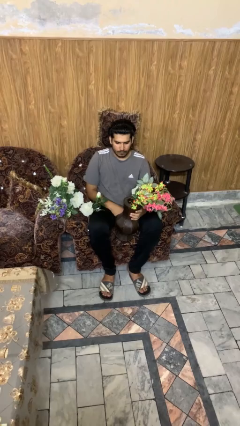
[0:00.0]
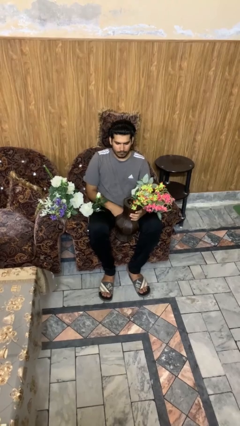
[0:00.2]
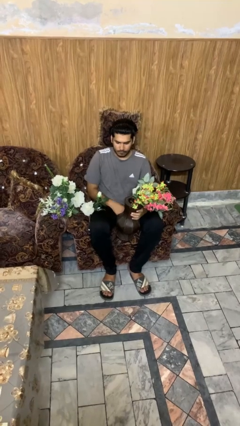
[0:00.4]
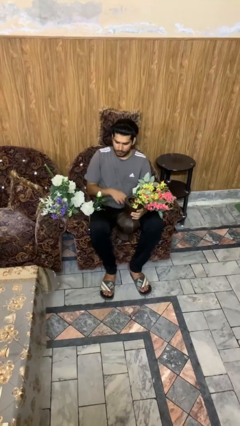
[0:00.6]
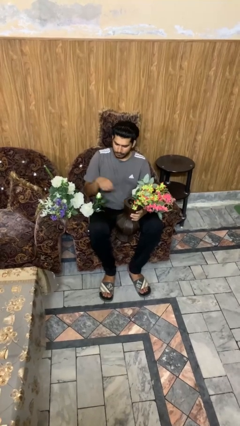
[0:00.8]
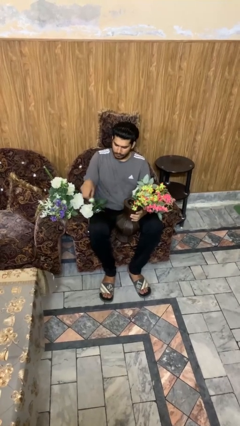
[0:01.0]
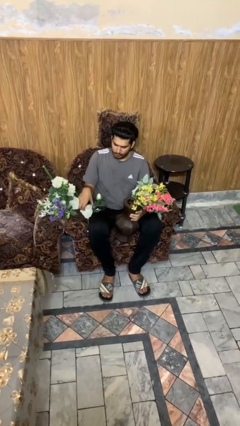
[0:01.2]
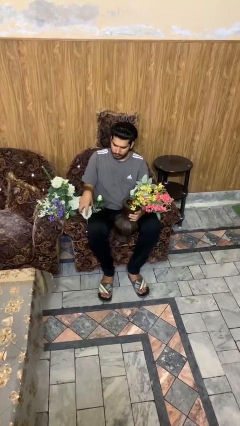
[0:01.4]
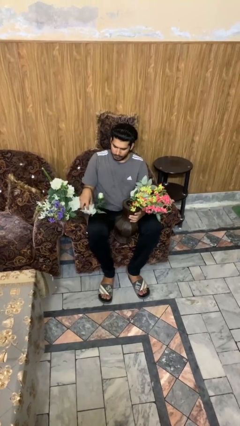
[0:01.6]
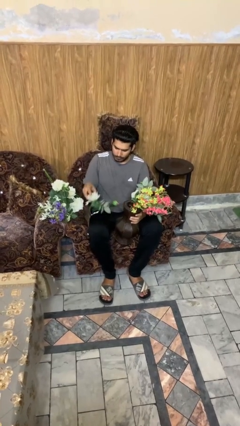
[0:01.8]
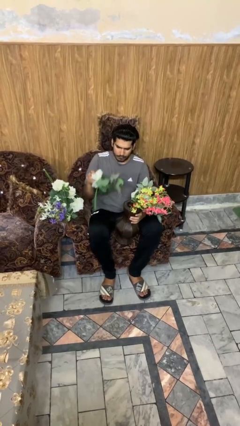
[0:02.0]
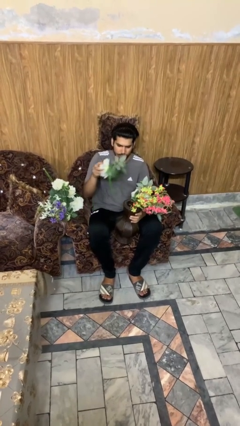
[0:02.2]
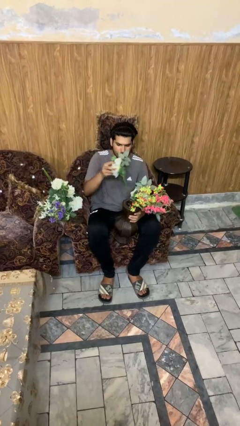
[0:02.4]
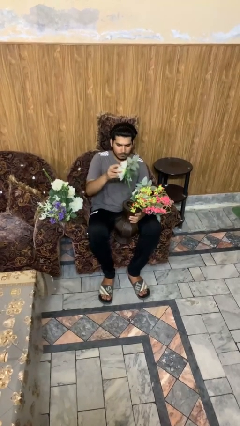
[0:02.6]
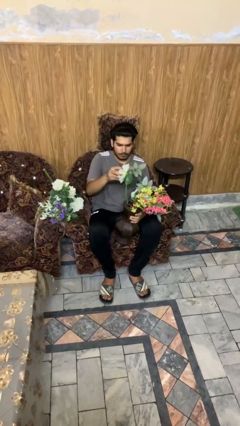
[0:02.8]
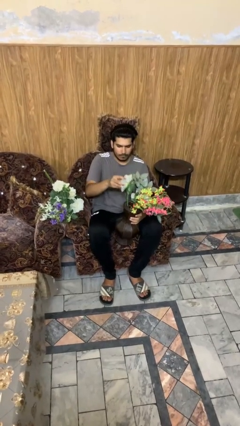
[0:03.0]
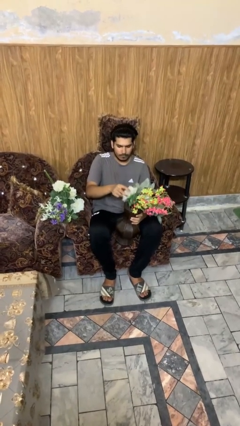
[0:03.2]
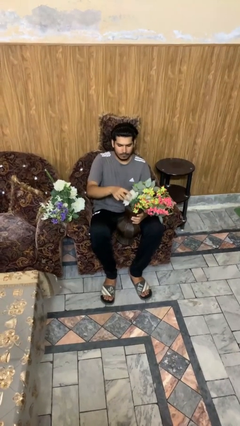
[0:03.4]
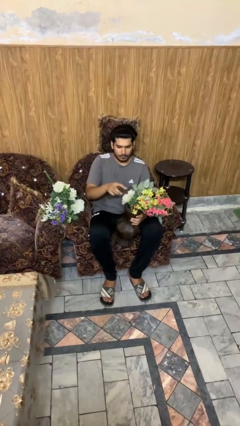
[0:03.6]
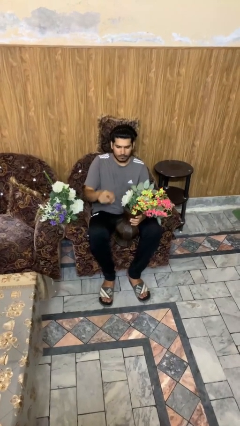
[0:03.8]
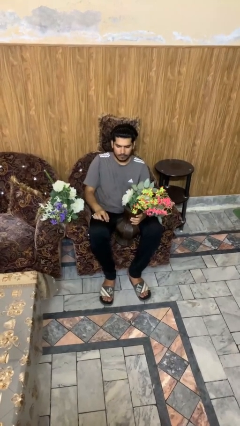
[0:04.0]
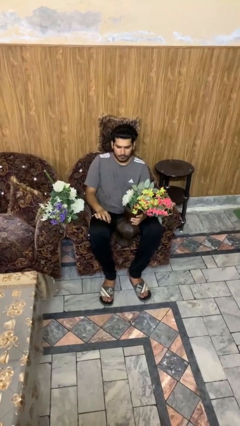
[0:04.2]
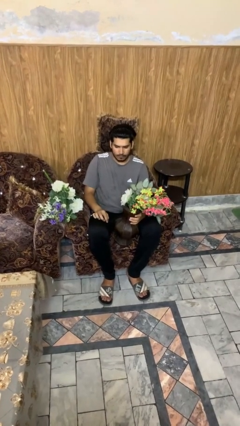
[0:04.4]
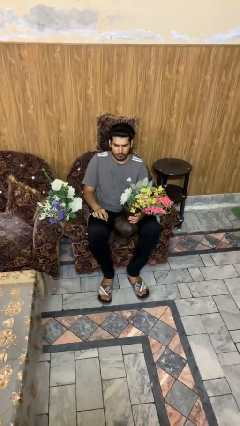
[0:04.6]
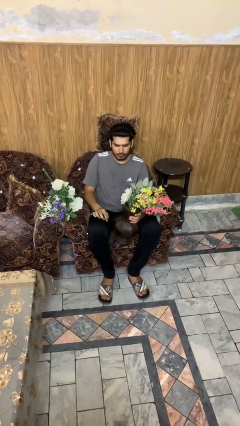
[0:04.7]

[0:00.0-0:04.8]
person arranges flowers in vase

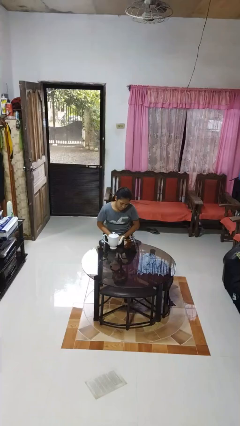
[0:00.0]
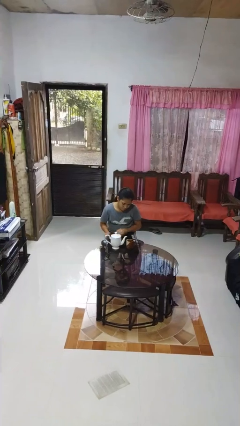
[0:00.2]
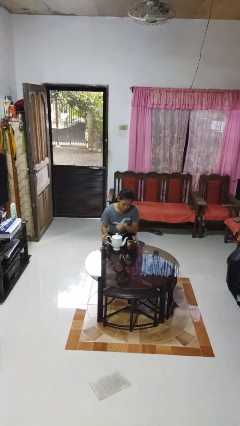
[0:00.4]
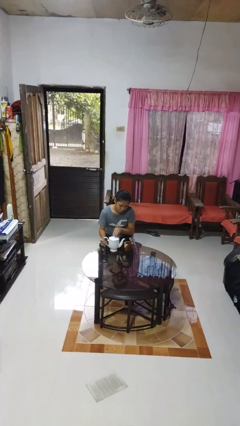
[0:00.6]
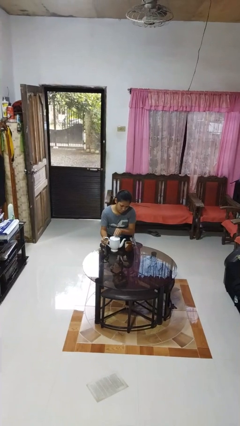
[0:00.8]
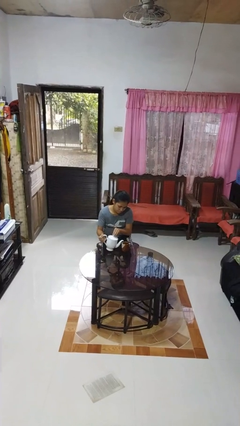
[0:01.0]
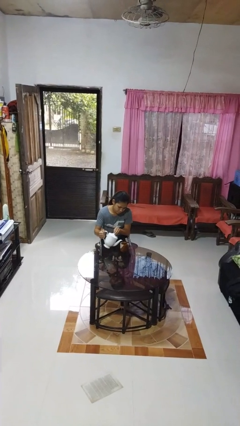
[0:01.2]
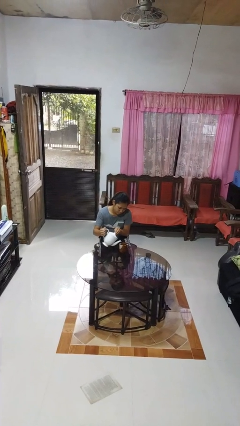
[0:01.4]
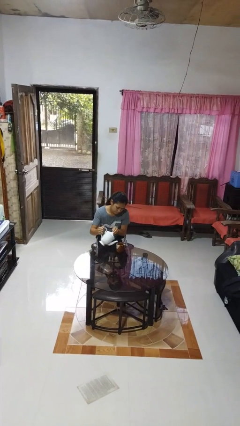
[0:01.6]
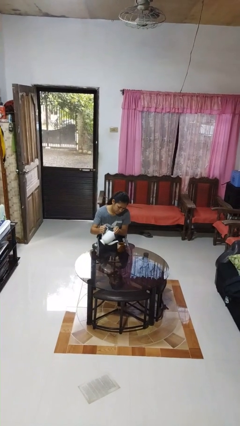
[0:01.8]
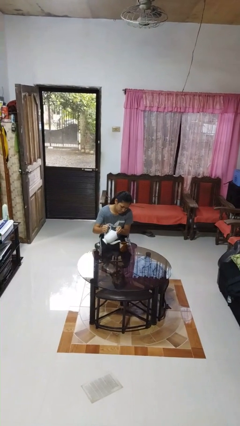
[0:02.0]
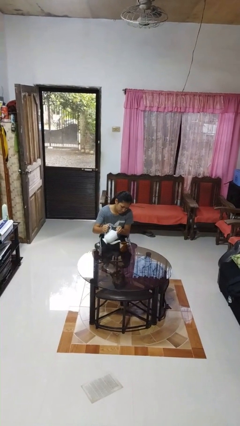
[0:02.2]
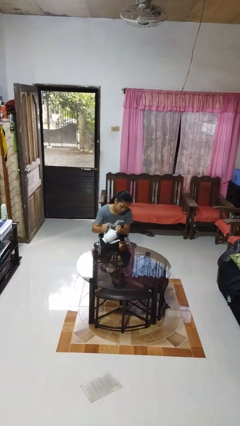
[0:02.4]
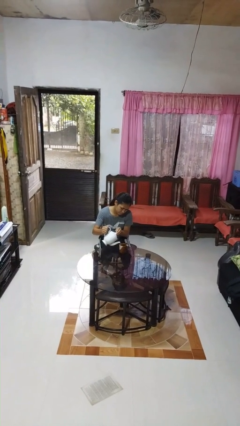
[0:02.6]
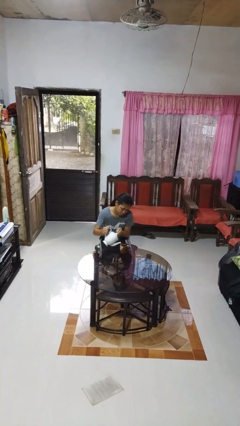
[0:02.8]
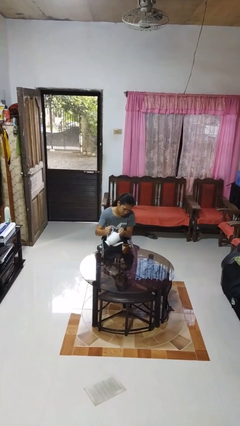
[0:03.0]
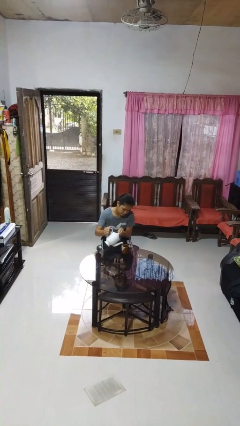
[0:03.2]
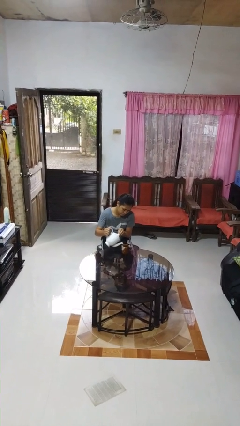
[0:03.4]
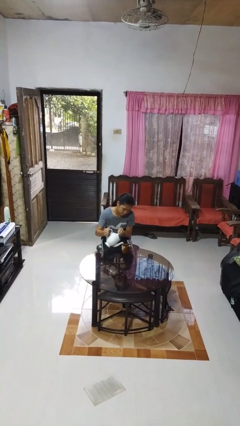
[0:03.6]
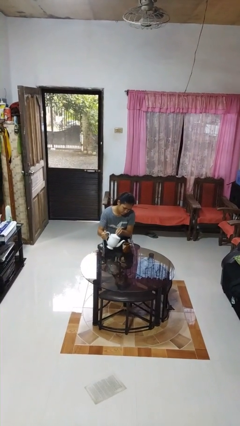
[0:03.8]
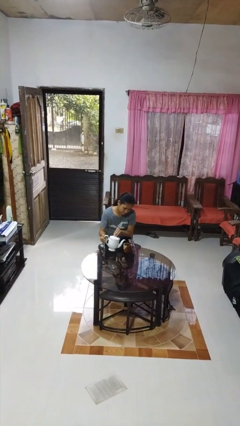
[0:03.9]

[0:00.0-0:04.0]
person pours coffee into mug

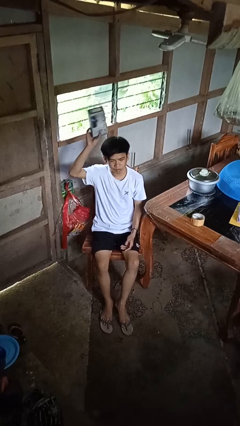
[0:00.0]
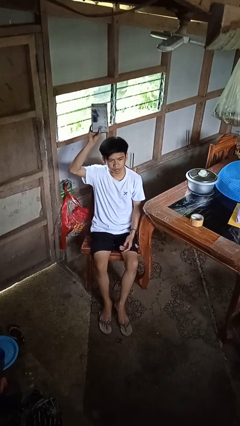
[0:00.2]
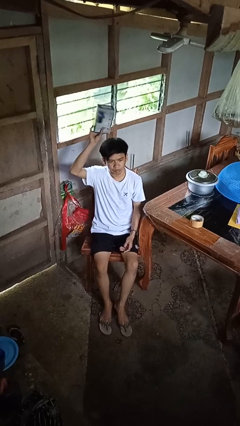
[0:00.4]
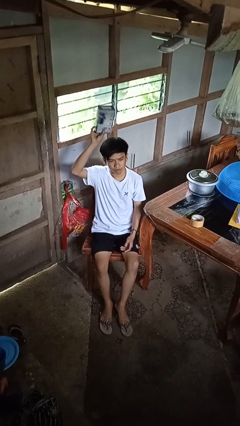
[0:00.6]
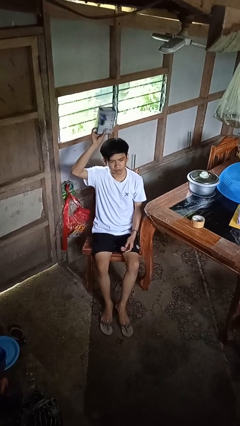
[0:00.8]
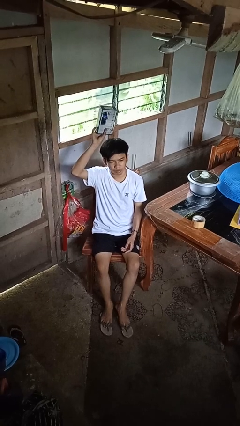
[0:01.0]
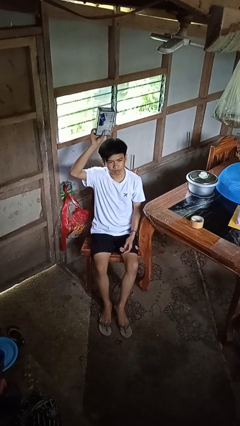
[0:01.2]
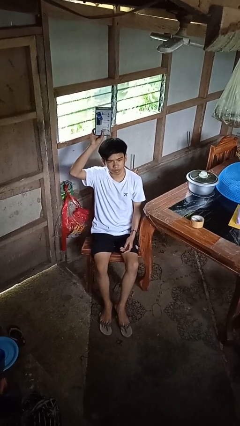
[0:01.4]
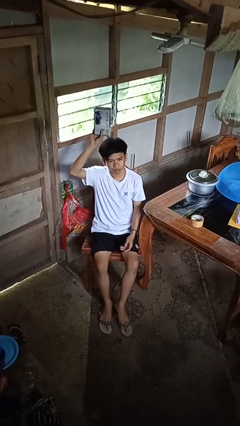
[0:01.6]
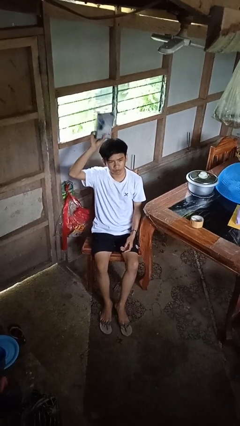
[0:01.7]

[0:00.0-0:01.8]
person holds object above head

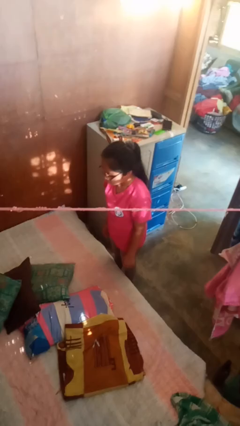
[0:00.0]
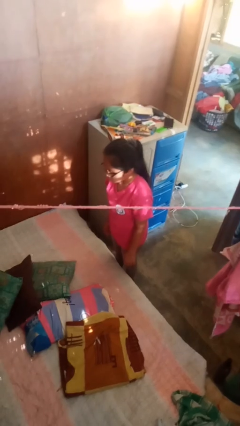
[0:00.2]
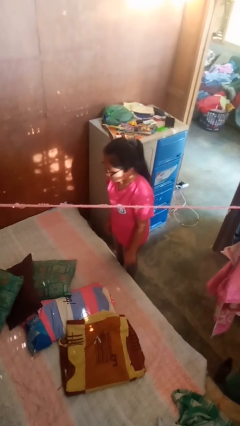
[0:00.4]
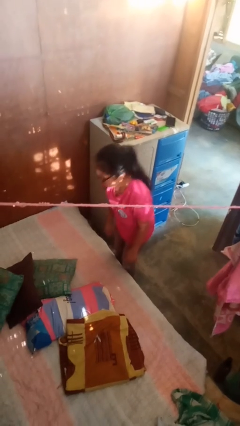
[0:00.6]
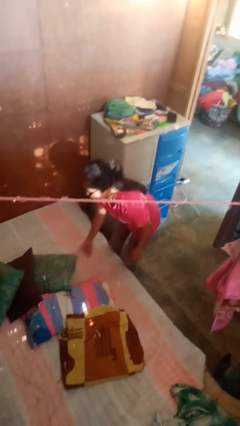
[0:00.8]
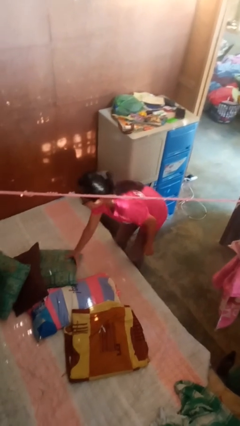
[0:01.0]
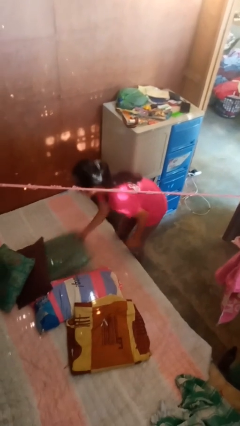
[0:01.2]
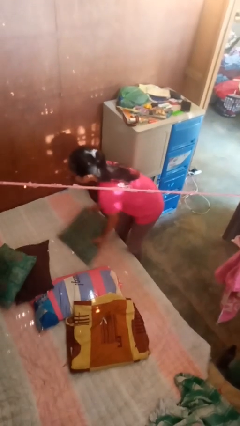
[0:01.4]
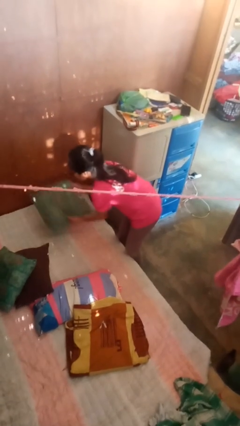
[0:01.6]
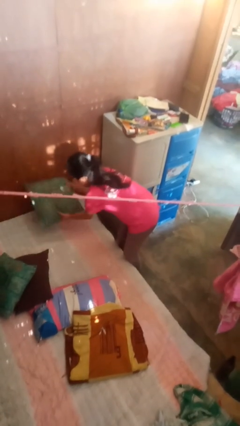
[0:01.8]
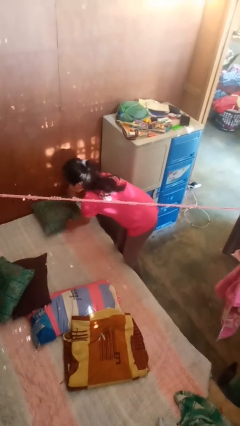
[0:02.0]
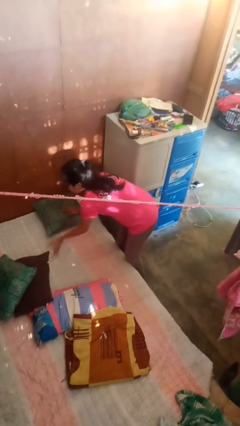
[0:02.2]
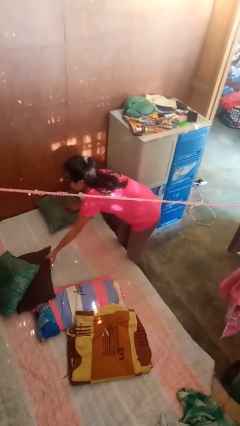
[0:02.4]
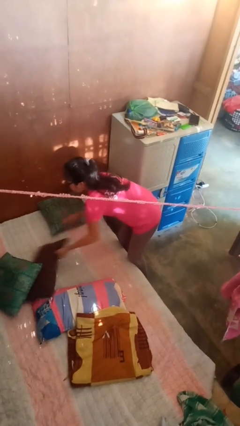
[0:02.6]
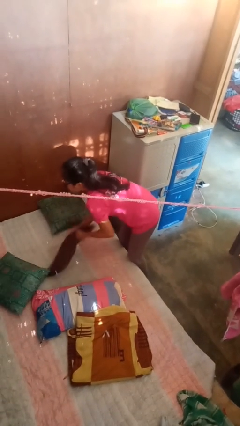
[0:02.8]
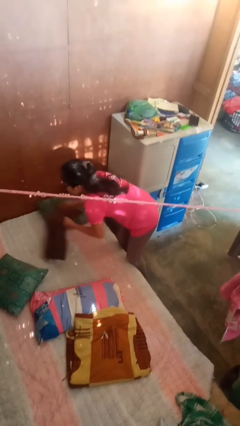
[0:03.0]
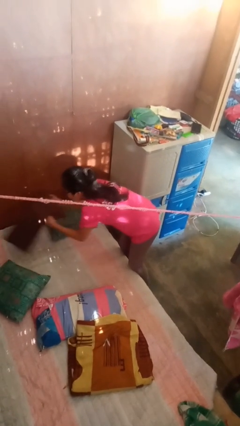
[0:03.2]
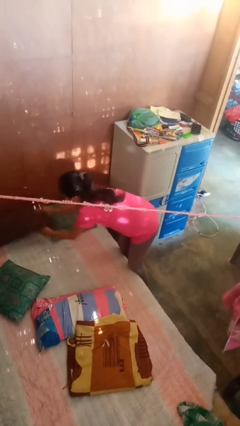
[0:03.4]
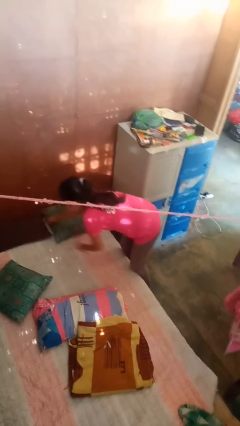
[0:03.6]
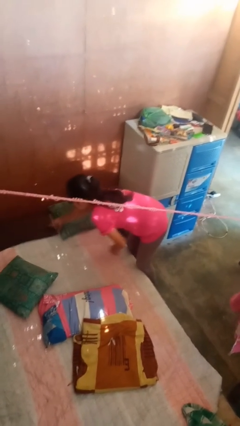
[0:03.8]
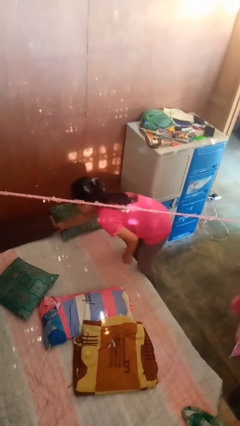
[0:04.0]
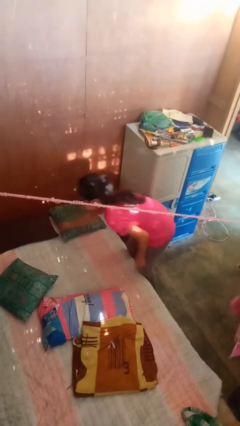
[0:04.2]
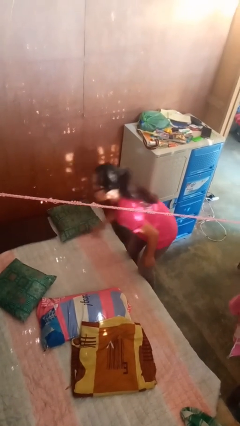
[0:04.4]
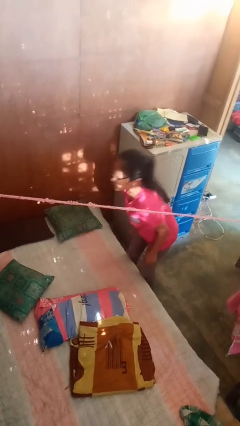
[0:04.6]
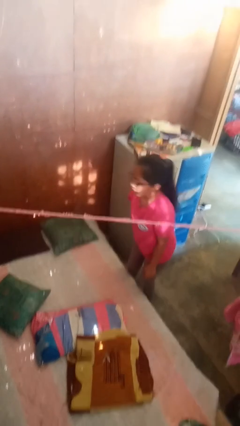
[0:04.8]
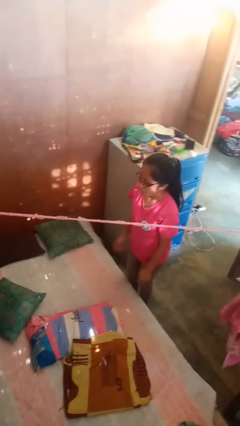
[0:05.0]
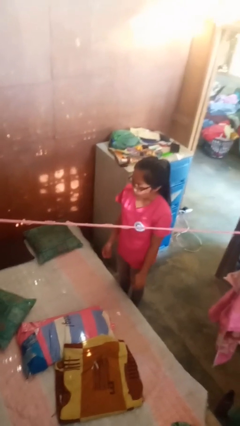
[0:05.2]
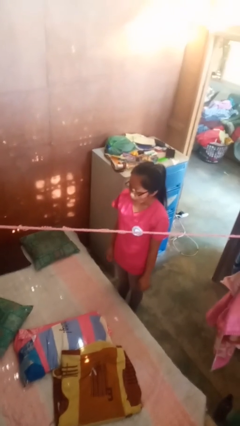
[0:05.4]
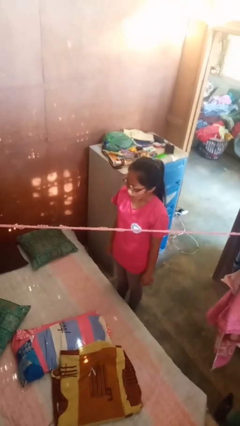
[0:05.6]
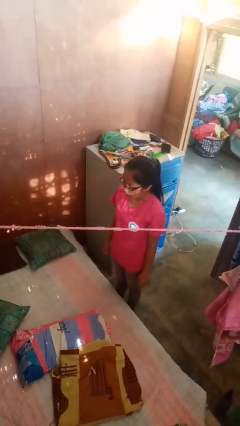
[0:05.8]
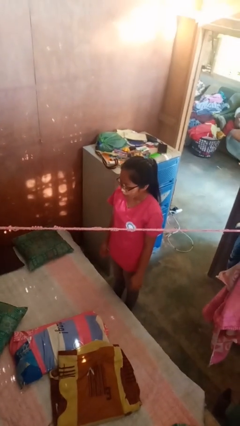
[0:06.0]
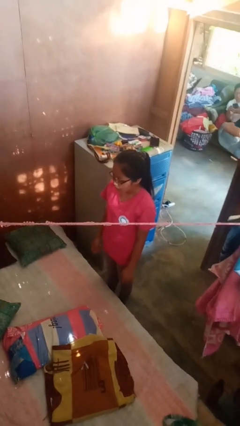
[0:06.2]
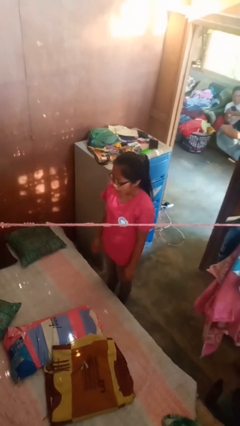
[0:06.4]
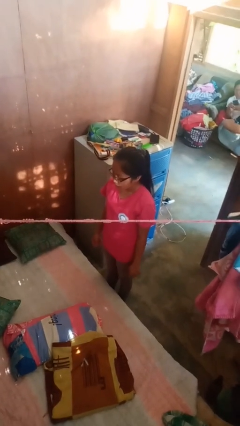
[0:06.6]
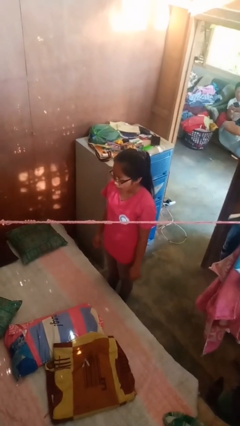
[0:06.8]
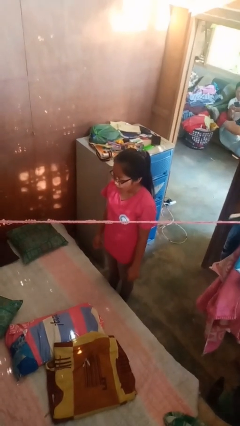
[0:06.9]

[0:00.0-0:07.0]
person makes bed
